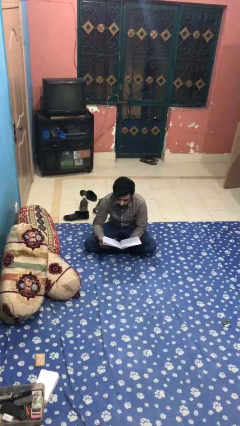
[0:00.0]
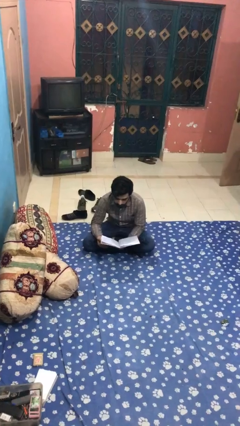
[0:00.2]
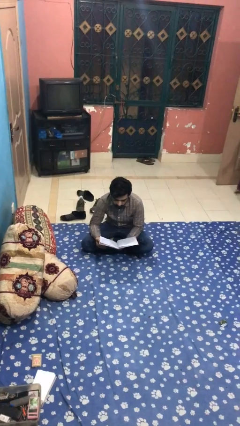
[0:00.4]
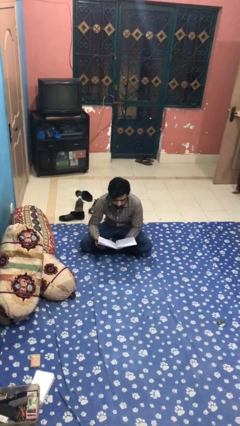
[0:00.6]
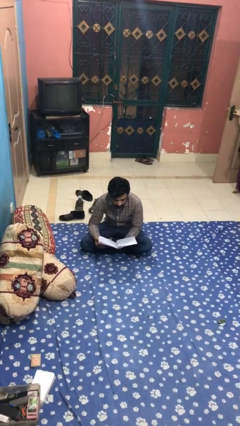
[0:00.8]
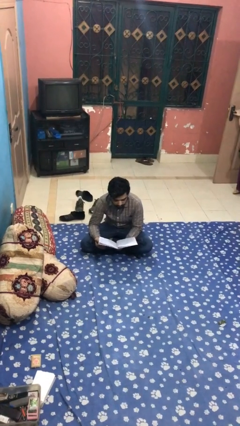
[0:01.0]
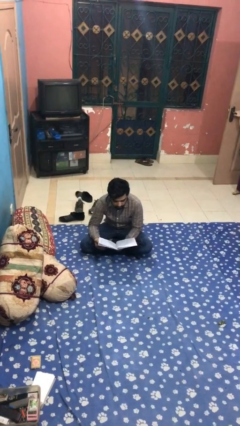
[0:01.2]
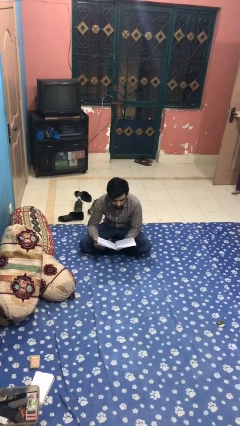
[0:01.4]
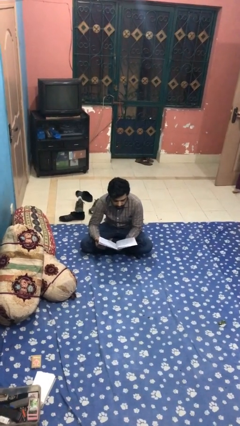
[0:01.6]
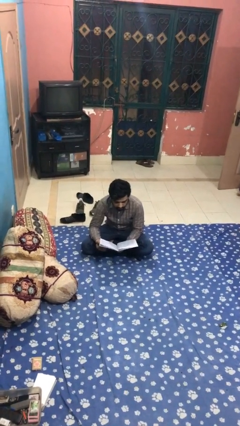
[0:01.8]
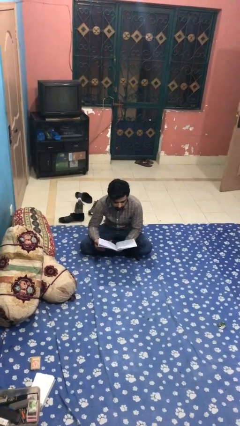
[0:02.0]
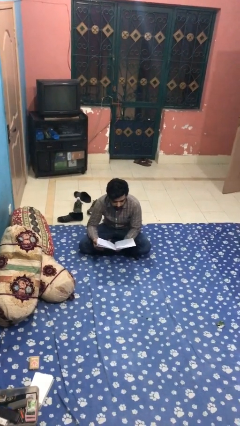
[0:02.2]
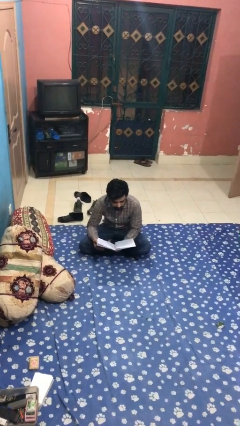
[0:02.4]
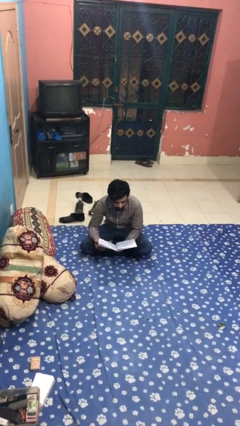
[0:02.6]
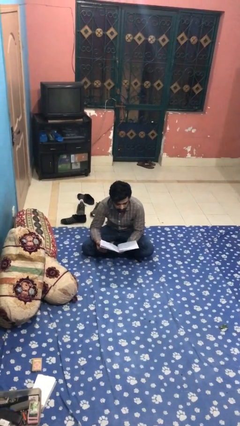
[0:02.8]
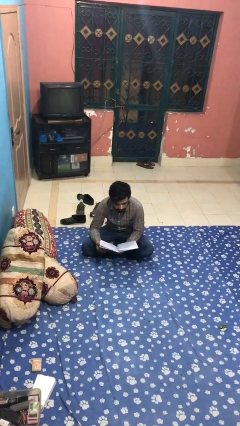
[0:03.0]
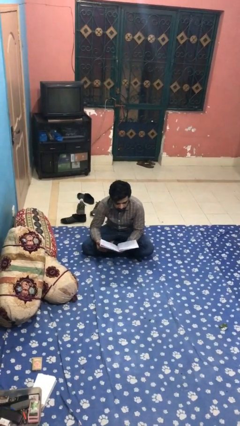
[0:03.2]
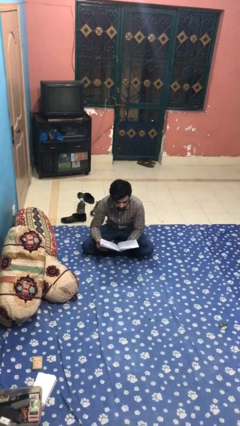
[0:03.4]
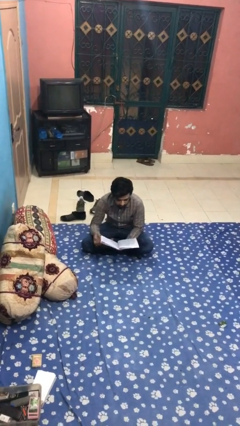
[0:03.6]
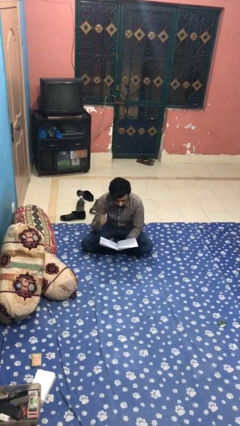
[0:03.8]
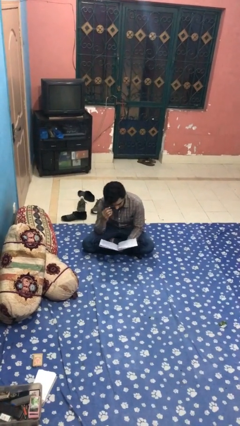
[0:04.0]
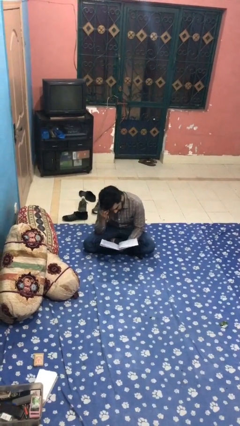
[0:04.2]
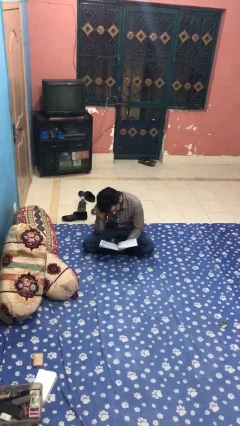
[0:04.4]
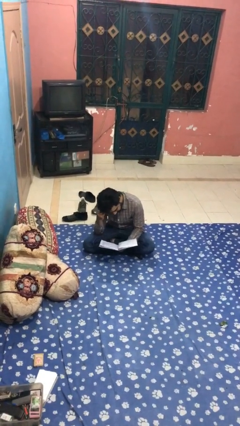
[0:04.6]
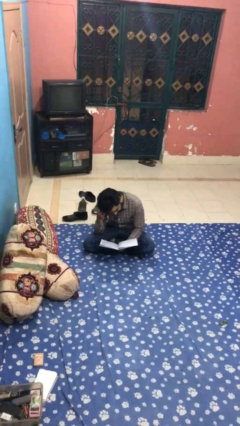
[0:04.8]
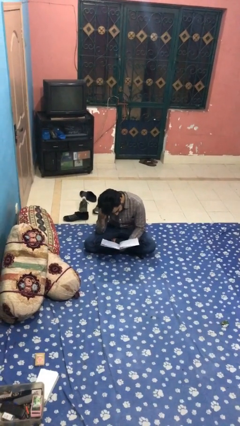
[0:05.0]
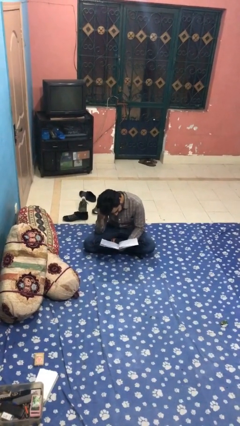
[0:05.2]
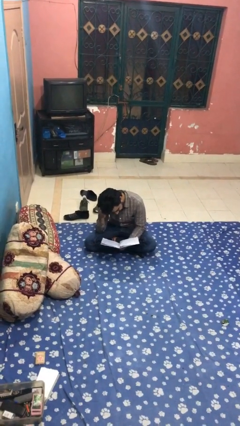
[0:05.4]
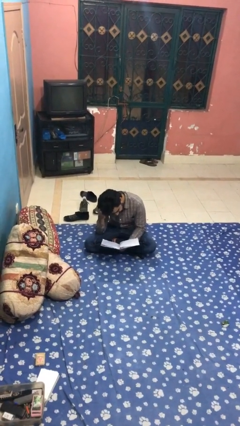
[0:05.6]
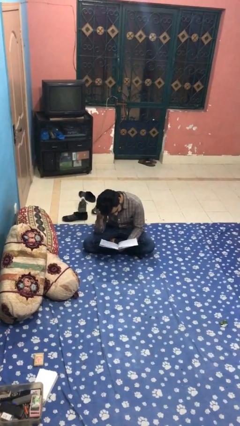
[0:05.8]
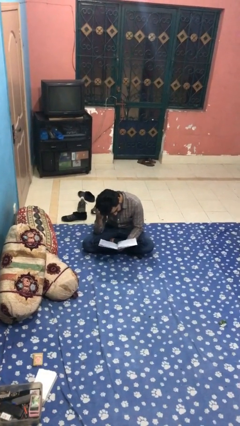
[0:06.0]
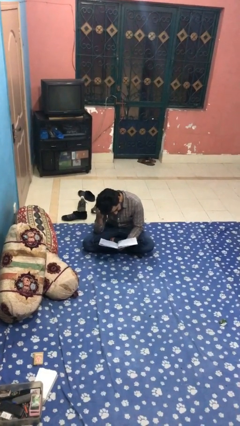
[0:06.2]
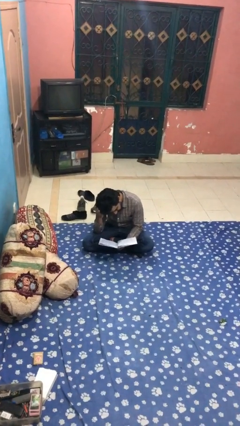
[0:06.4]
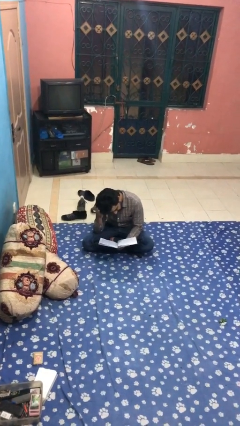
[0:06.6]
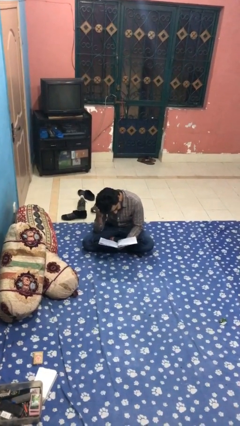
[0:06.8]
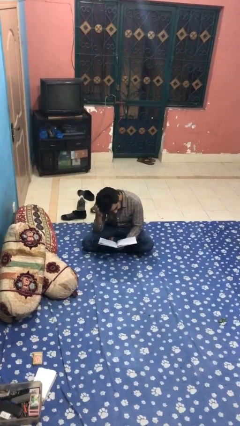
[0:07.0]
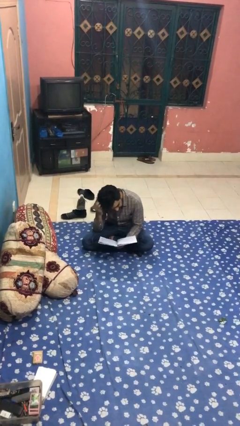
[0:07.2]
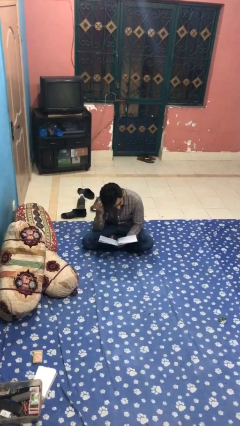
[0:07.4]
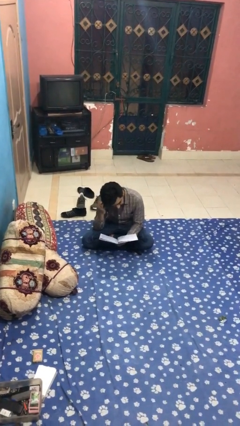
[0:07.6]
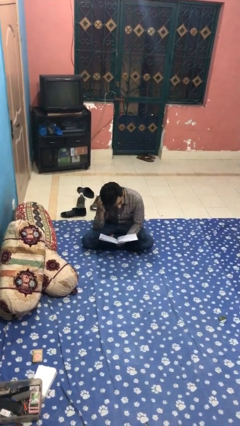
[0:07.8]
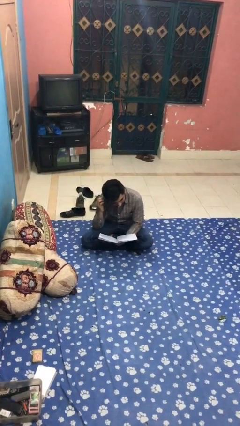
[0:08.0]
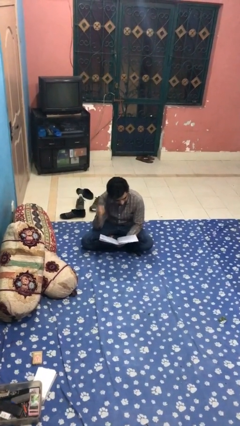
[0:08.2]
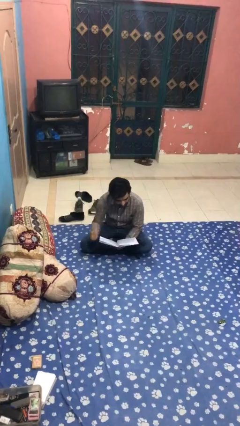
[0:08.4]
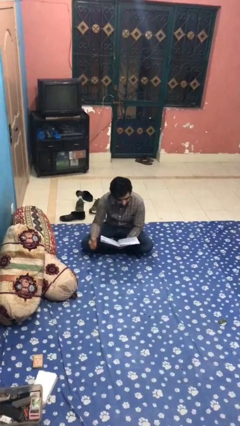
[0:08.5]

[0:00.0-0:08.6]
person reads document

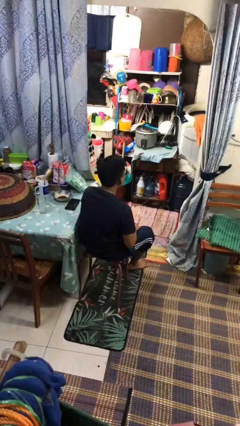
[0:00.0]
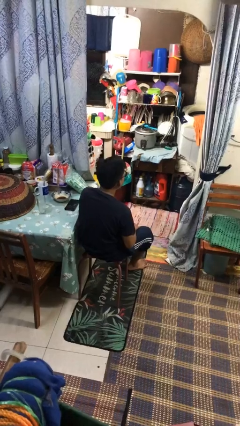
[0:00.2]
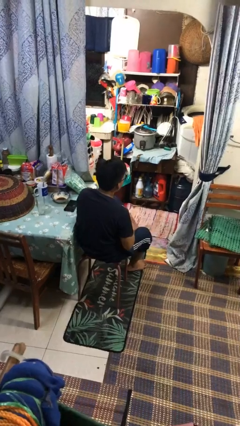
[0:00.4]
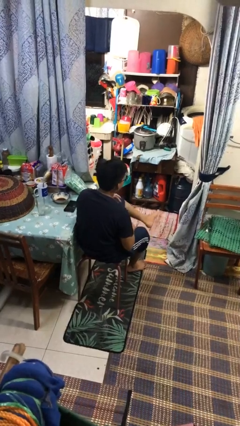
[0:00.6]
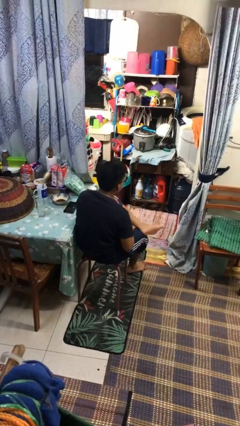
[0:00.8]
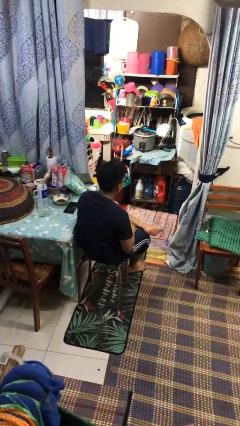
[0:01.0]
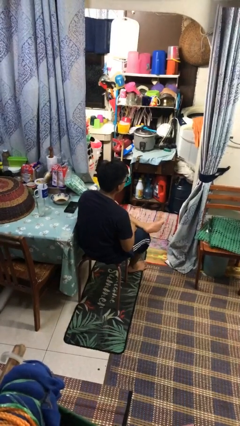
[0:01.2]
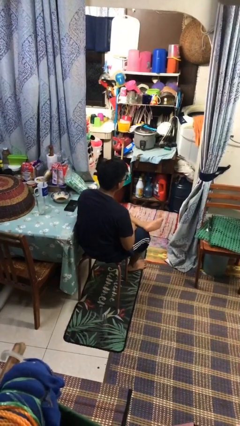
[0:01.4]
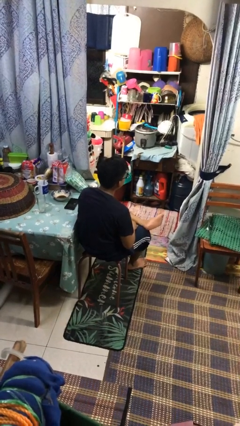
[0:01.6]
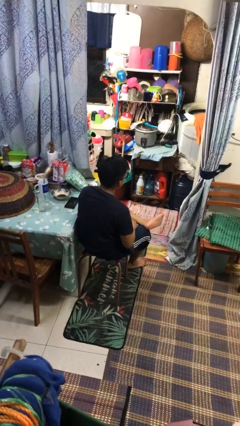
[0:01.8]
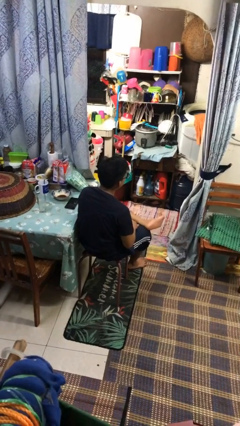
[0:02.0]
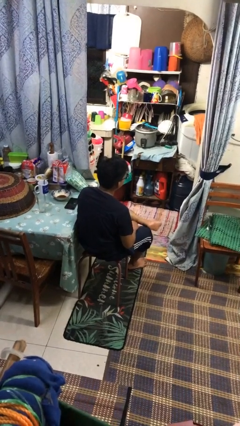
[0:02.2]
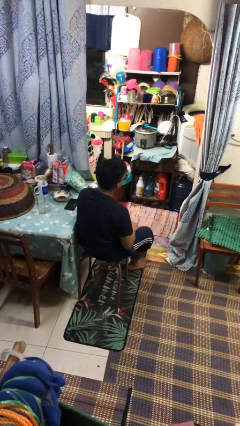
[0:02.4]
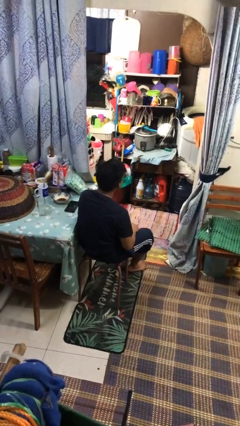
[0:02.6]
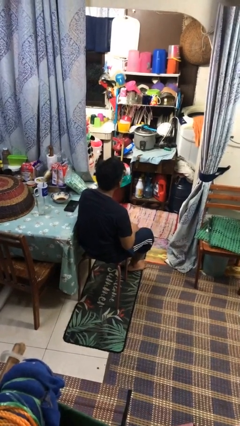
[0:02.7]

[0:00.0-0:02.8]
person crosses legs

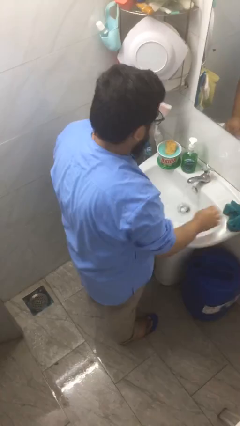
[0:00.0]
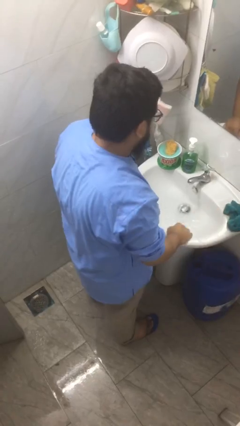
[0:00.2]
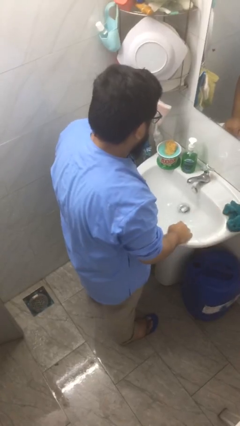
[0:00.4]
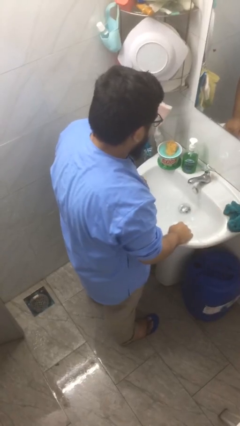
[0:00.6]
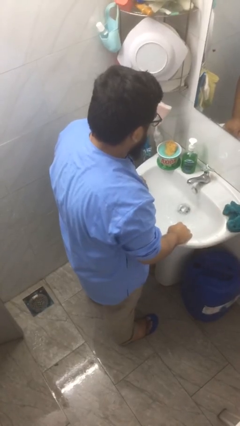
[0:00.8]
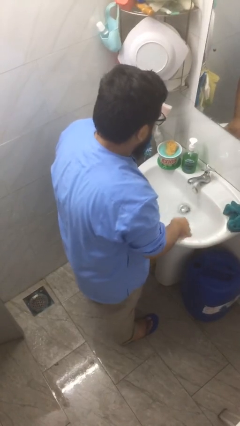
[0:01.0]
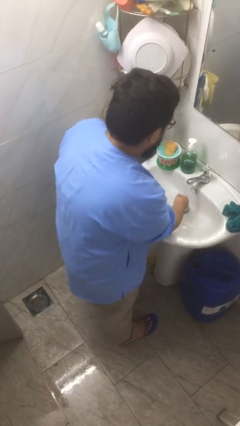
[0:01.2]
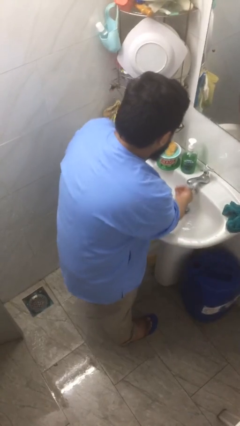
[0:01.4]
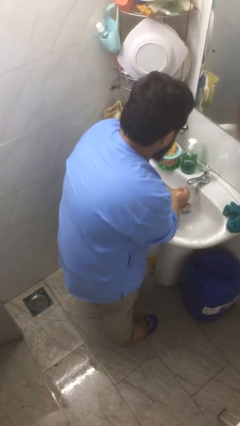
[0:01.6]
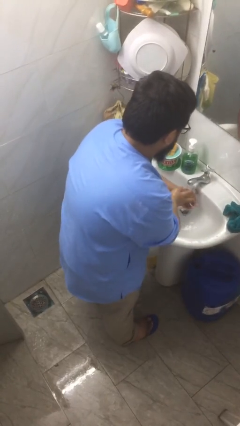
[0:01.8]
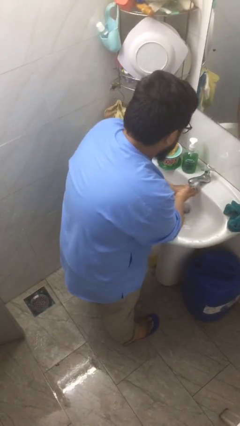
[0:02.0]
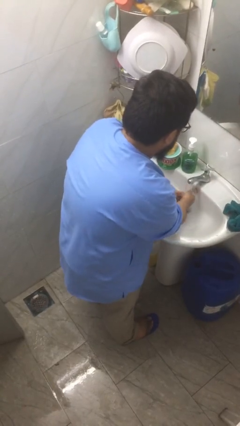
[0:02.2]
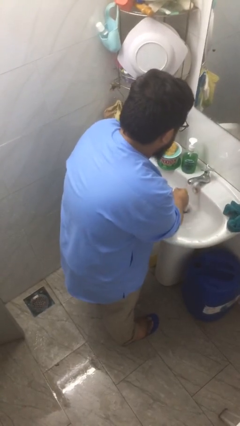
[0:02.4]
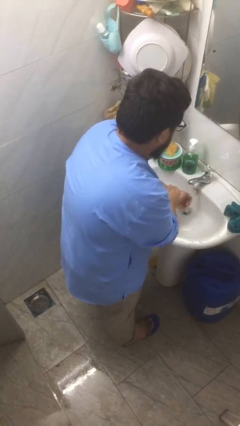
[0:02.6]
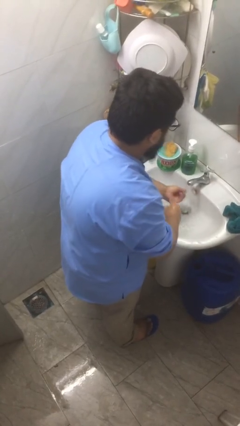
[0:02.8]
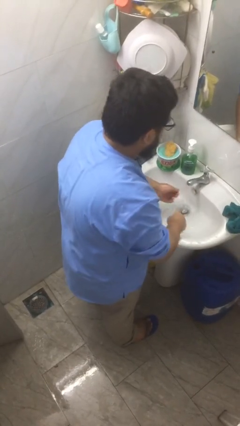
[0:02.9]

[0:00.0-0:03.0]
person washes hands

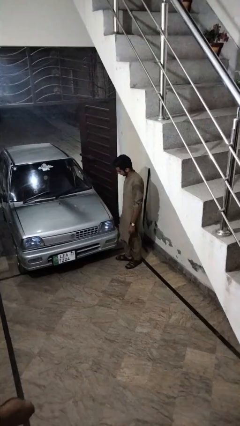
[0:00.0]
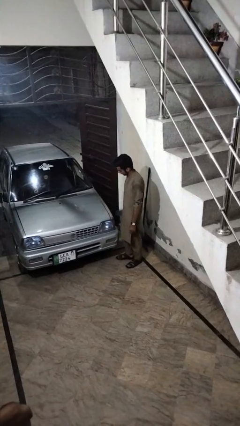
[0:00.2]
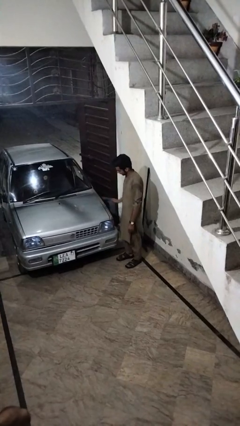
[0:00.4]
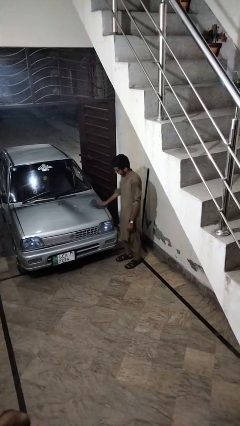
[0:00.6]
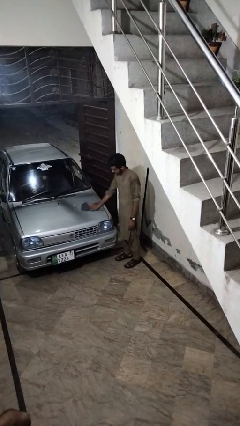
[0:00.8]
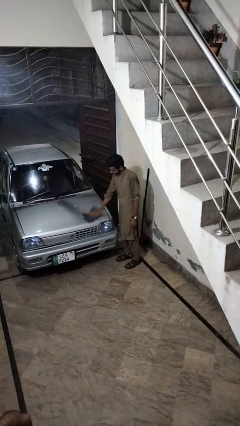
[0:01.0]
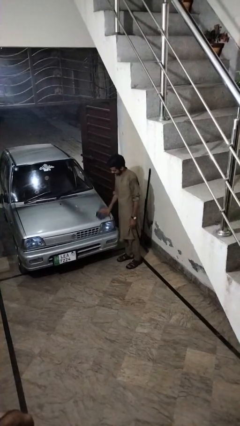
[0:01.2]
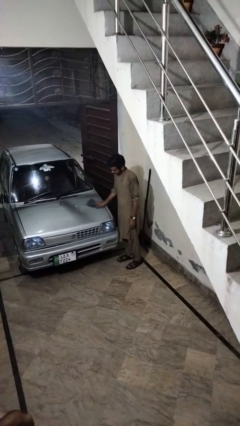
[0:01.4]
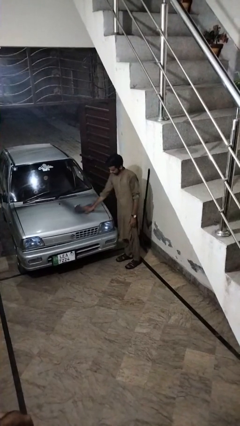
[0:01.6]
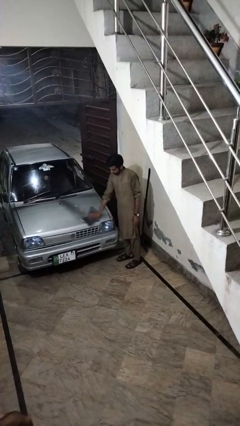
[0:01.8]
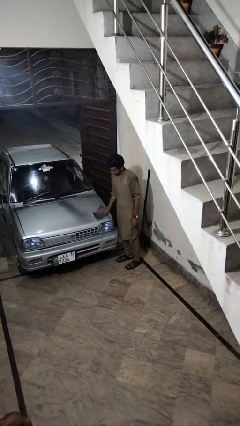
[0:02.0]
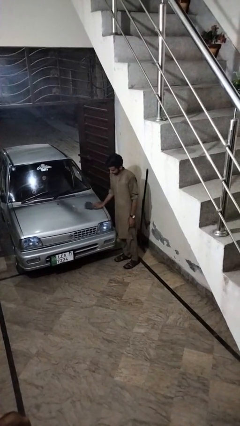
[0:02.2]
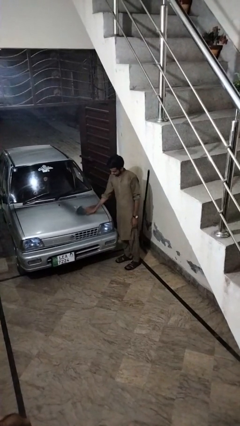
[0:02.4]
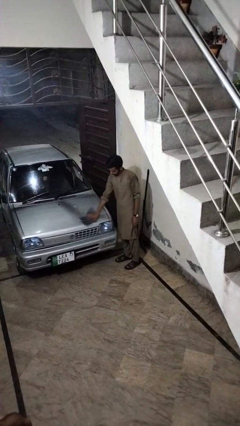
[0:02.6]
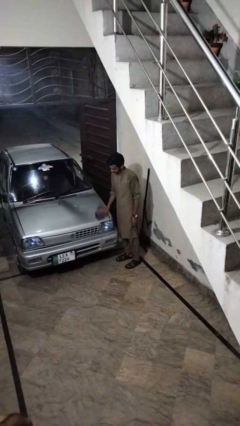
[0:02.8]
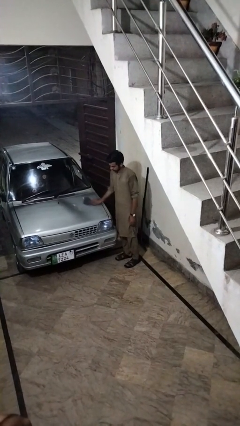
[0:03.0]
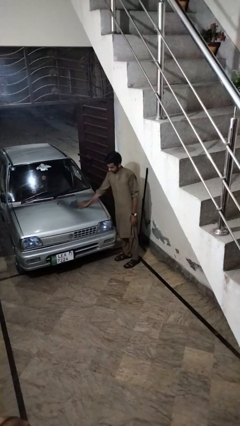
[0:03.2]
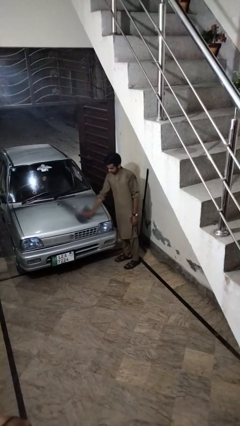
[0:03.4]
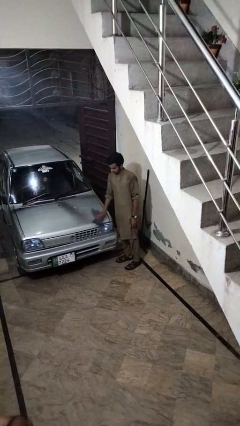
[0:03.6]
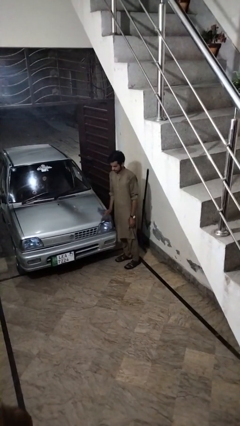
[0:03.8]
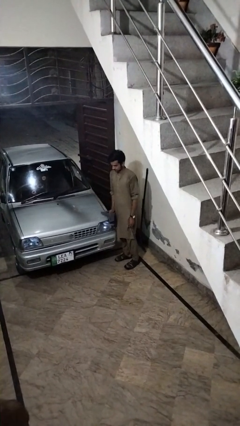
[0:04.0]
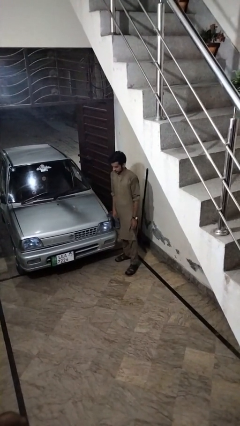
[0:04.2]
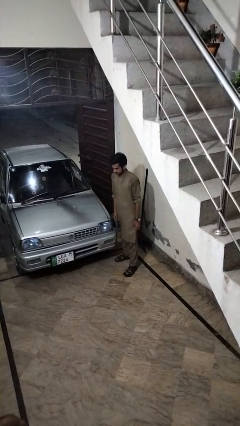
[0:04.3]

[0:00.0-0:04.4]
person polishes car with rag
